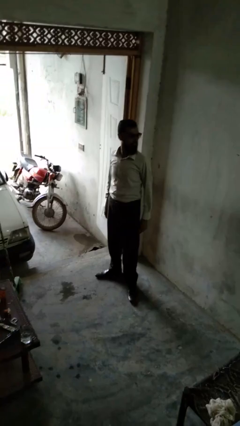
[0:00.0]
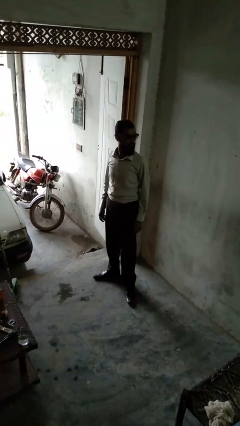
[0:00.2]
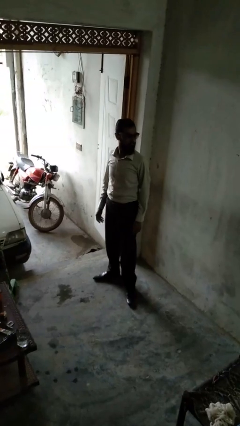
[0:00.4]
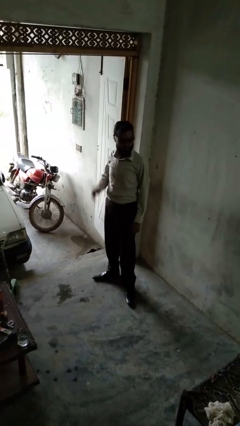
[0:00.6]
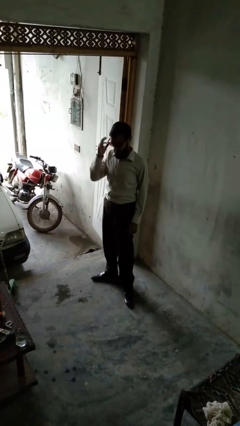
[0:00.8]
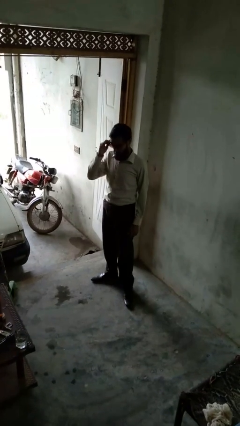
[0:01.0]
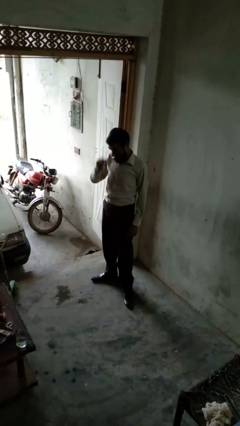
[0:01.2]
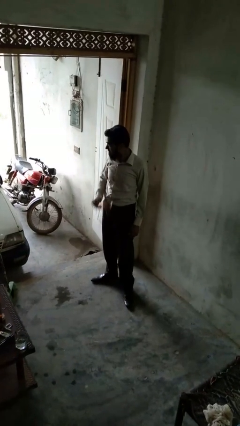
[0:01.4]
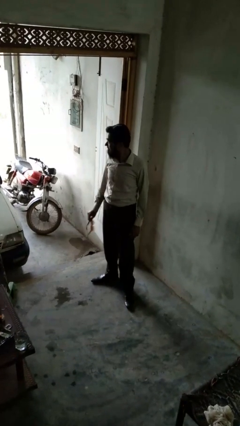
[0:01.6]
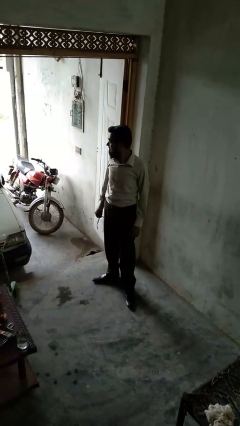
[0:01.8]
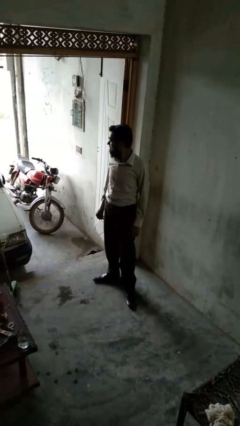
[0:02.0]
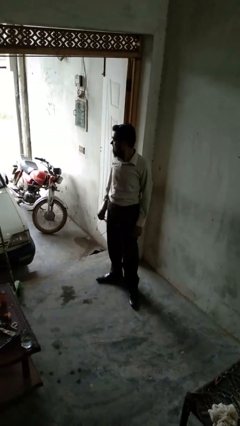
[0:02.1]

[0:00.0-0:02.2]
person takes off sunglasses

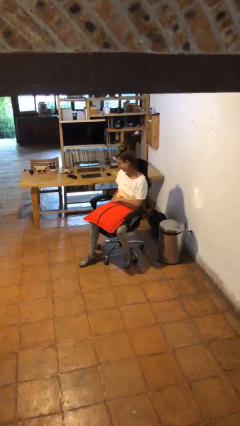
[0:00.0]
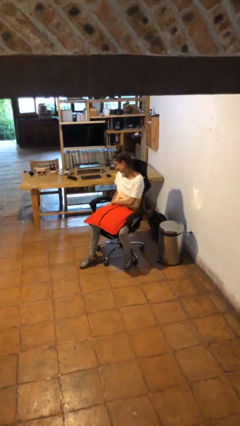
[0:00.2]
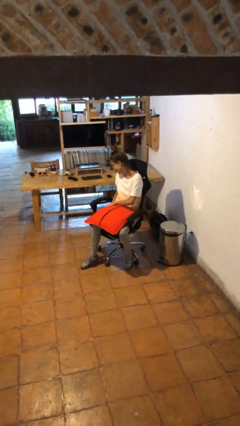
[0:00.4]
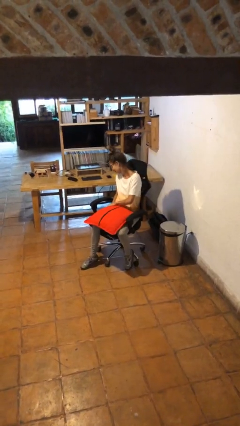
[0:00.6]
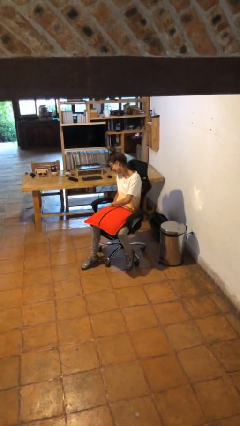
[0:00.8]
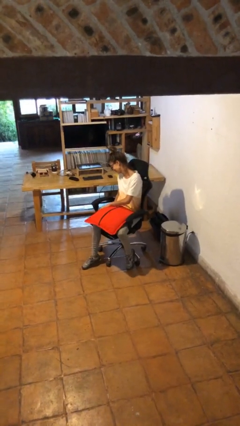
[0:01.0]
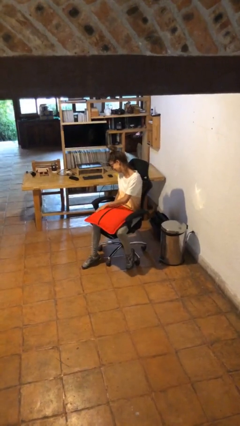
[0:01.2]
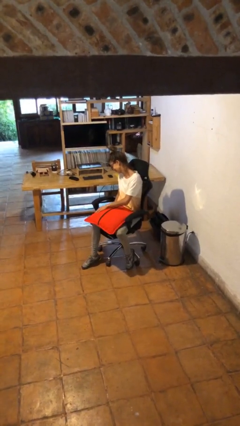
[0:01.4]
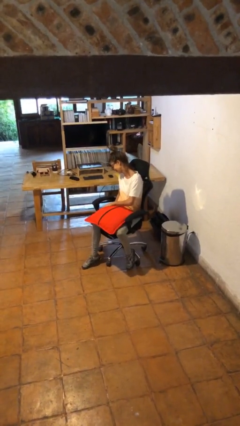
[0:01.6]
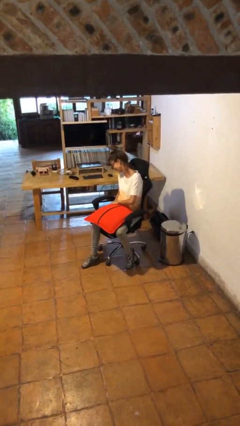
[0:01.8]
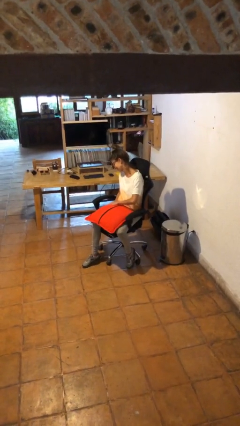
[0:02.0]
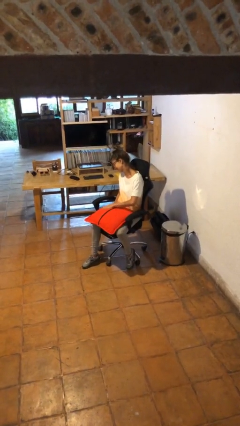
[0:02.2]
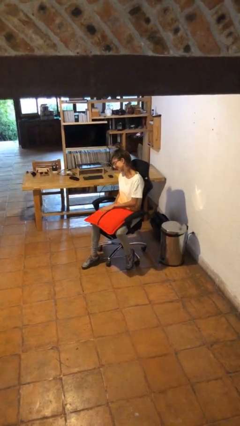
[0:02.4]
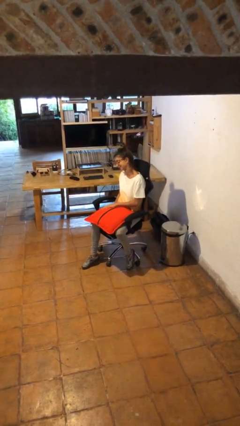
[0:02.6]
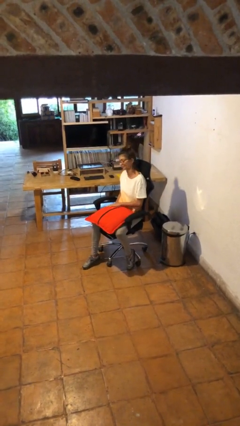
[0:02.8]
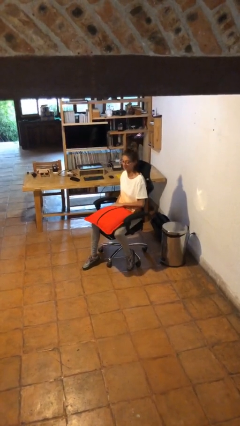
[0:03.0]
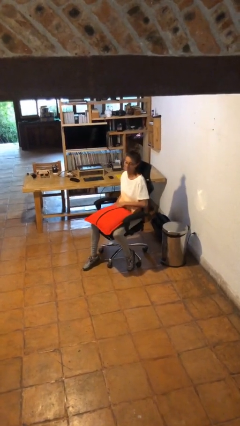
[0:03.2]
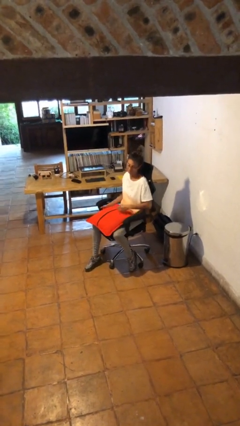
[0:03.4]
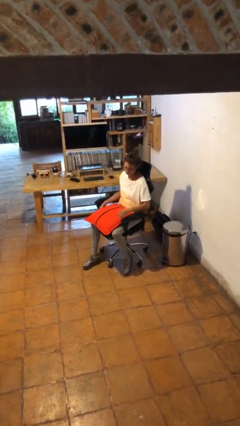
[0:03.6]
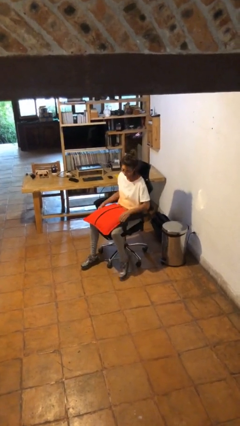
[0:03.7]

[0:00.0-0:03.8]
person waves hand over object

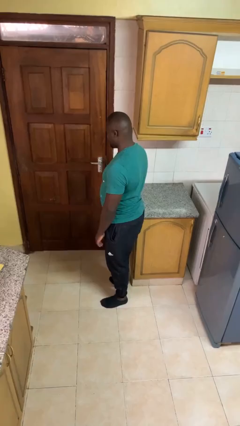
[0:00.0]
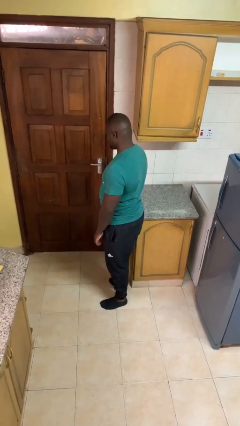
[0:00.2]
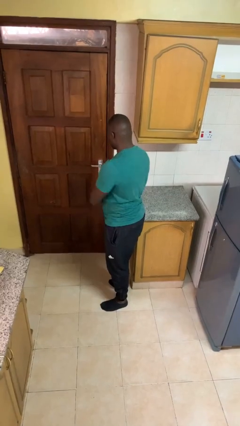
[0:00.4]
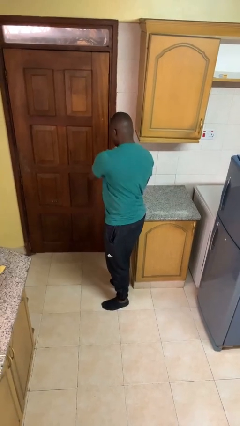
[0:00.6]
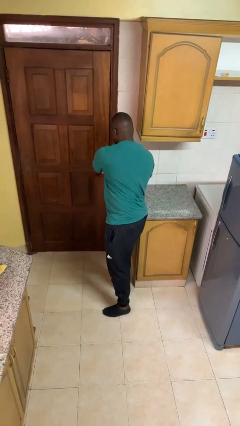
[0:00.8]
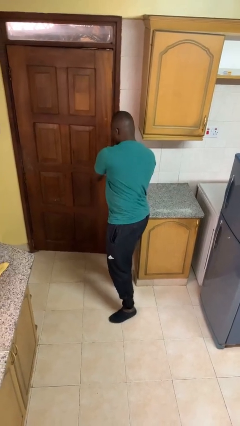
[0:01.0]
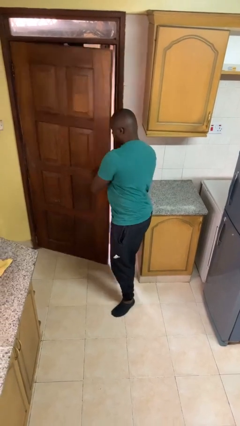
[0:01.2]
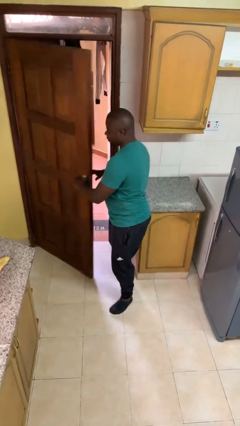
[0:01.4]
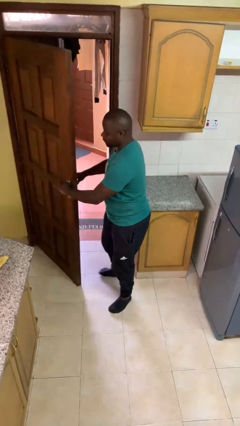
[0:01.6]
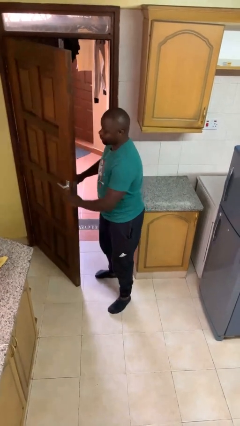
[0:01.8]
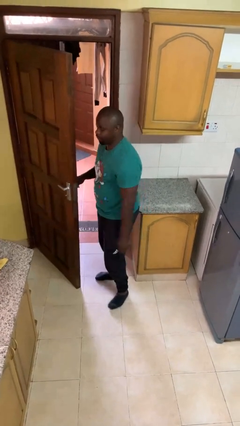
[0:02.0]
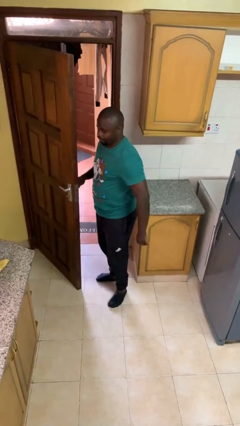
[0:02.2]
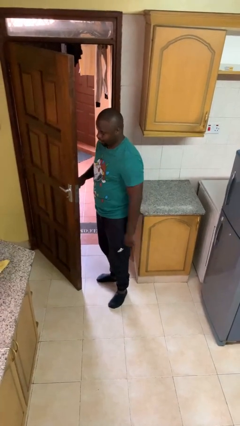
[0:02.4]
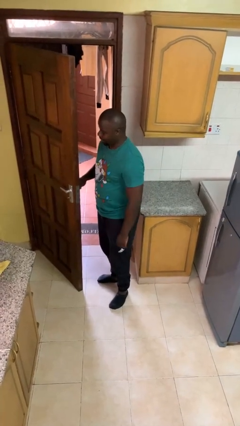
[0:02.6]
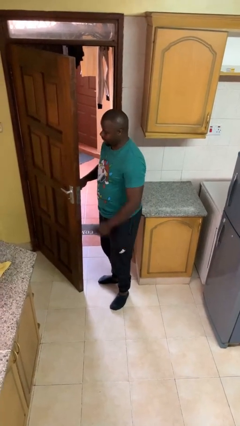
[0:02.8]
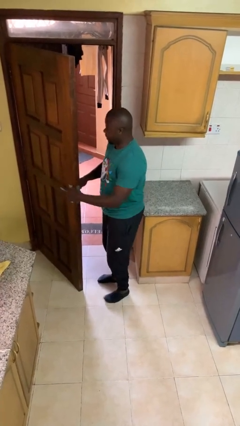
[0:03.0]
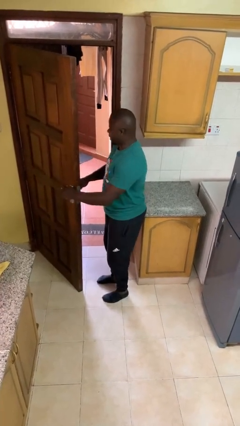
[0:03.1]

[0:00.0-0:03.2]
person opens facility door

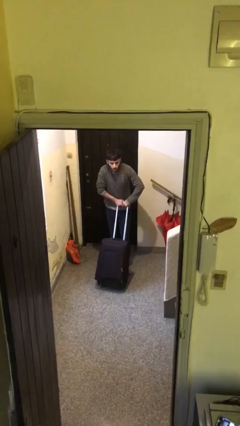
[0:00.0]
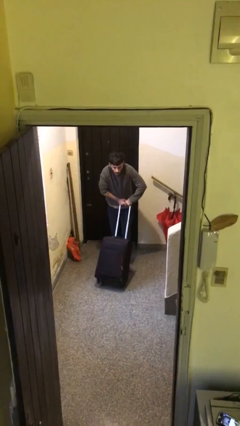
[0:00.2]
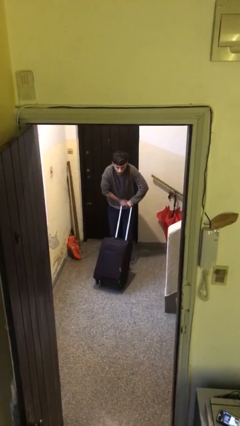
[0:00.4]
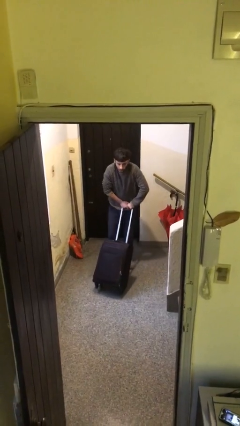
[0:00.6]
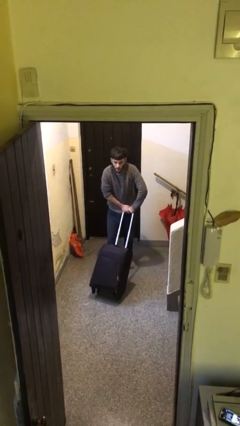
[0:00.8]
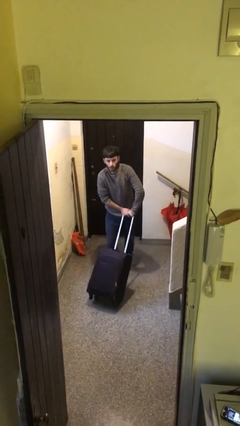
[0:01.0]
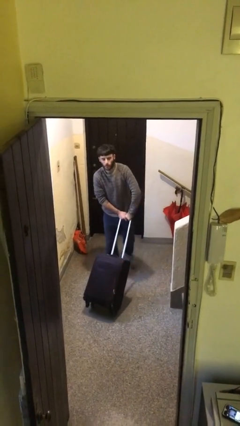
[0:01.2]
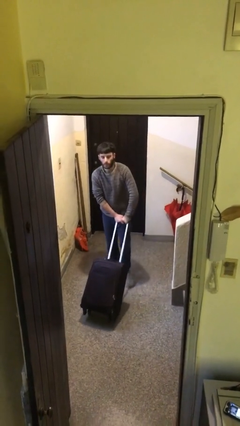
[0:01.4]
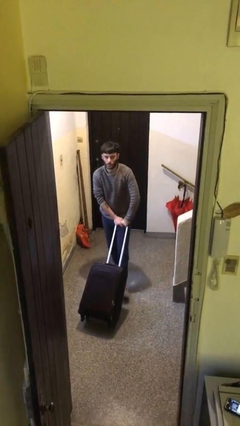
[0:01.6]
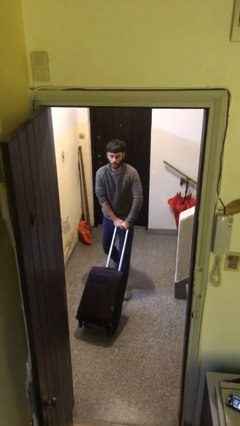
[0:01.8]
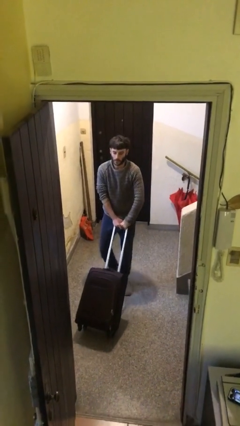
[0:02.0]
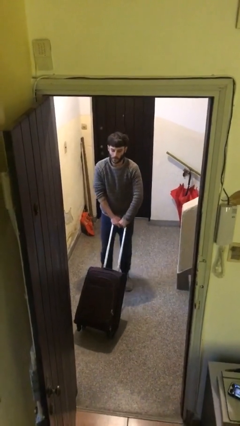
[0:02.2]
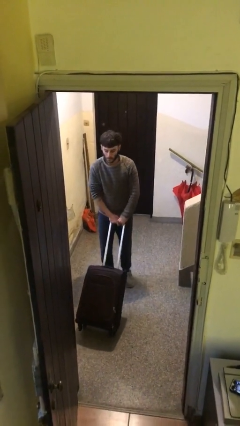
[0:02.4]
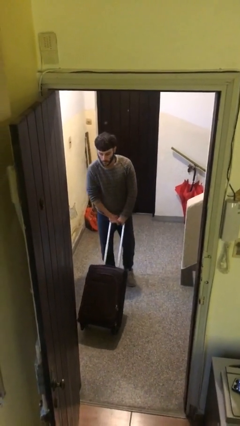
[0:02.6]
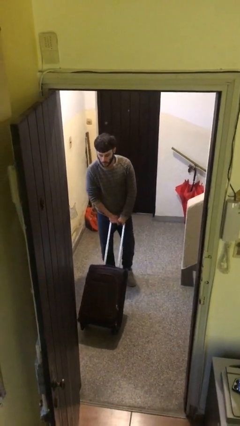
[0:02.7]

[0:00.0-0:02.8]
person pushes wheeled cart

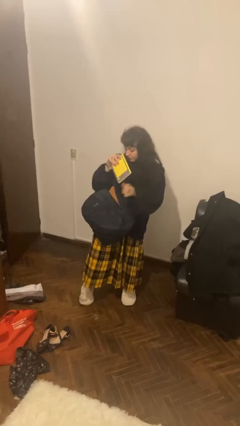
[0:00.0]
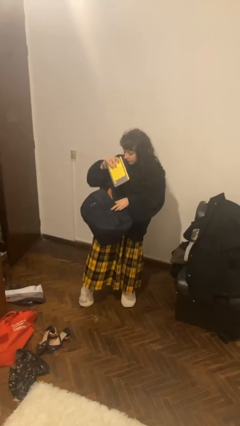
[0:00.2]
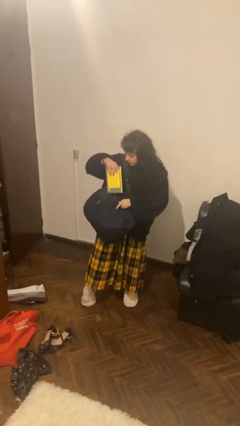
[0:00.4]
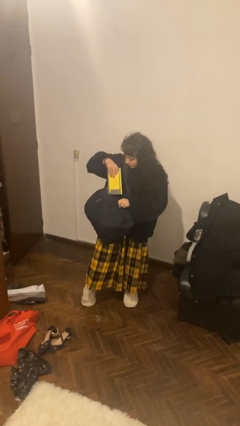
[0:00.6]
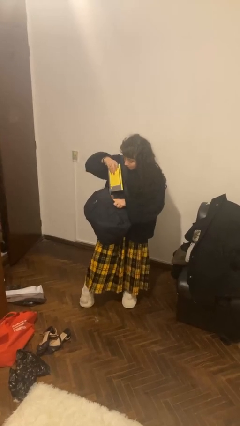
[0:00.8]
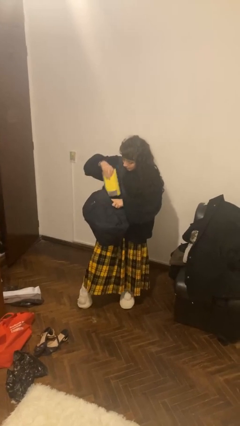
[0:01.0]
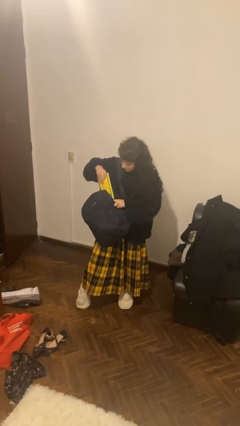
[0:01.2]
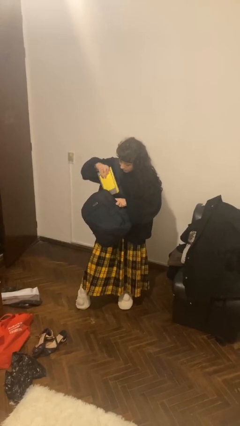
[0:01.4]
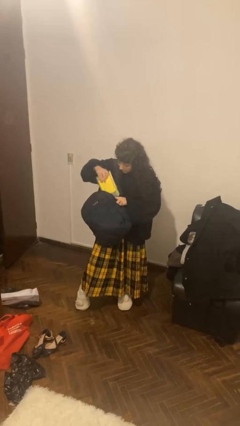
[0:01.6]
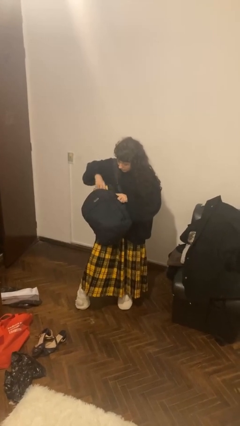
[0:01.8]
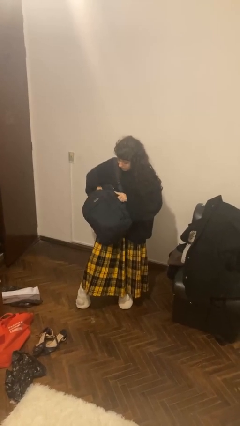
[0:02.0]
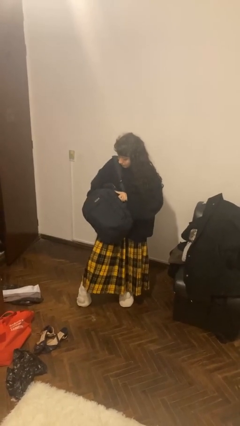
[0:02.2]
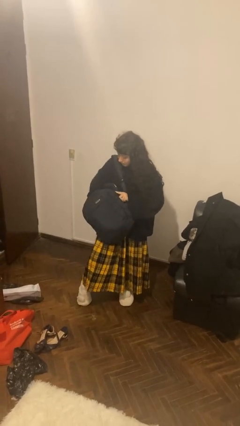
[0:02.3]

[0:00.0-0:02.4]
person puts object into backpack

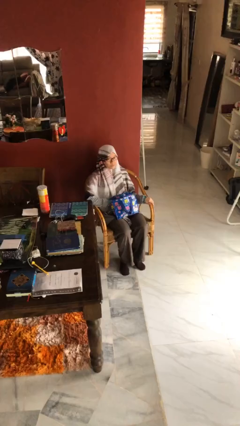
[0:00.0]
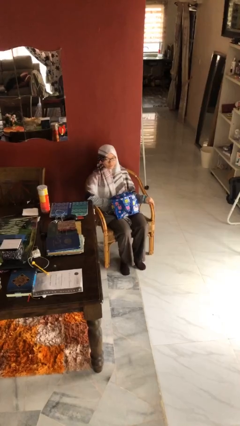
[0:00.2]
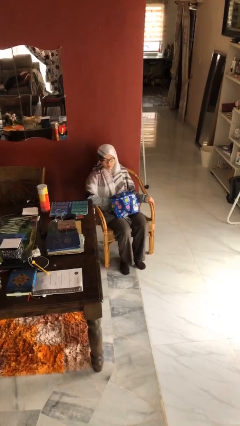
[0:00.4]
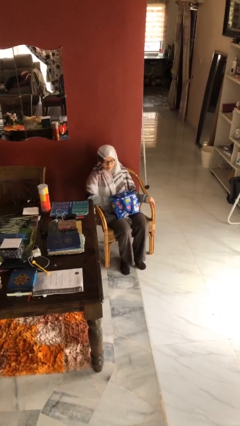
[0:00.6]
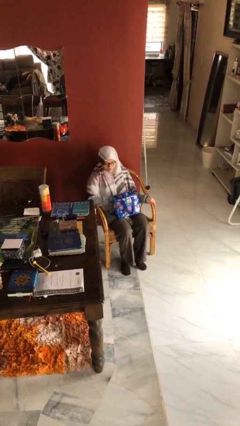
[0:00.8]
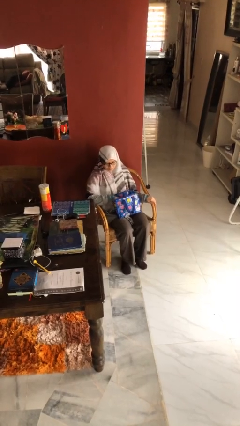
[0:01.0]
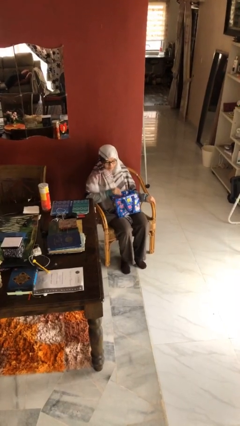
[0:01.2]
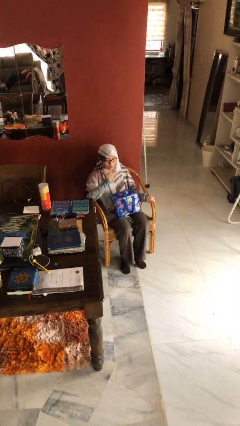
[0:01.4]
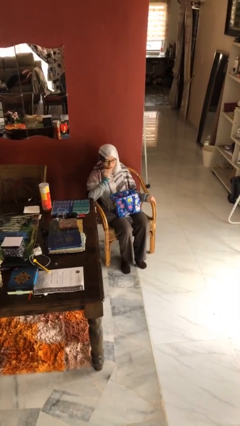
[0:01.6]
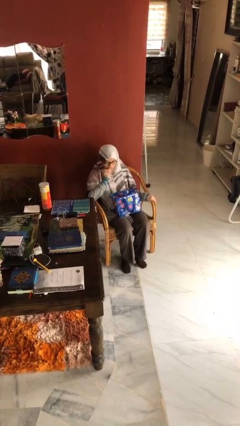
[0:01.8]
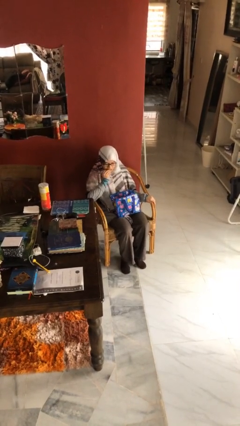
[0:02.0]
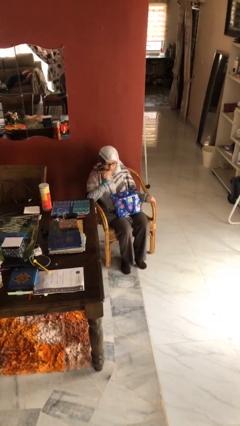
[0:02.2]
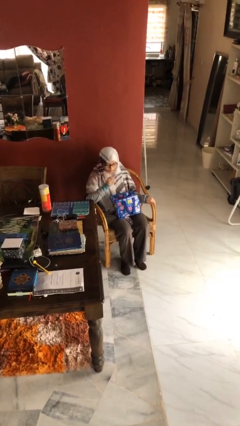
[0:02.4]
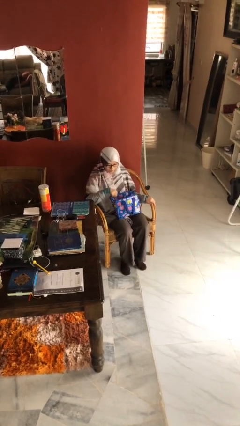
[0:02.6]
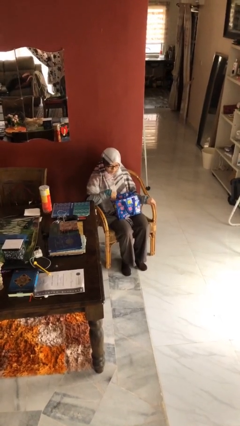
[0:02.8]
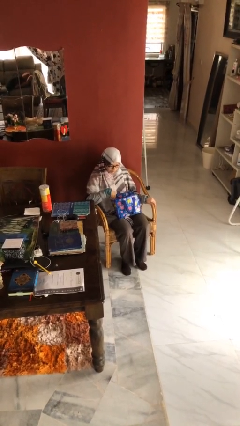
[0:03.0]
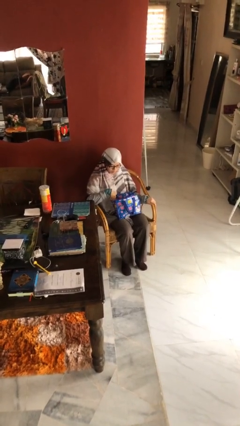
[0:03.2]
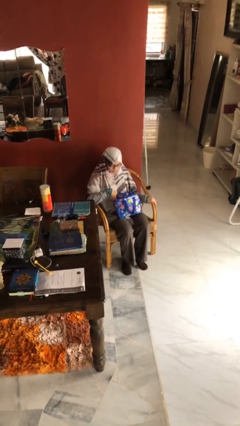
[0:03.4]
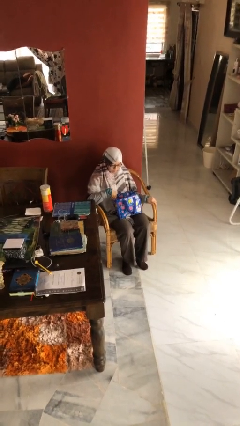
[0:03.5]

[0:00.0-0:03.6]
person eats snack from bag
